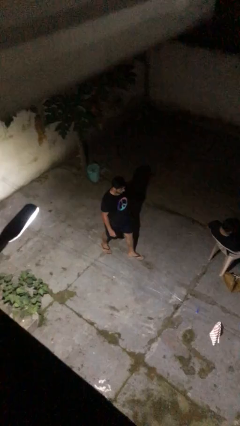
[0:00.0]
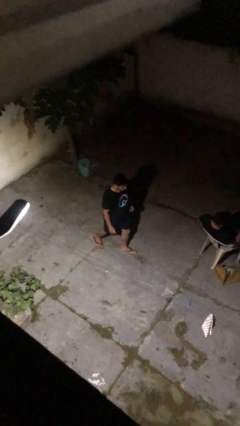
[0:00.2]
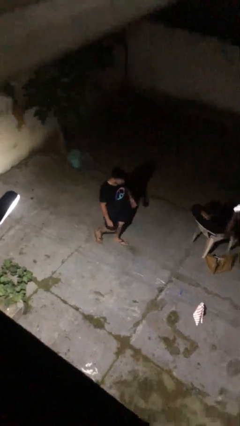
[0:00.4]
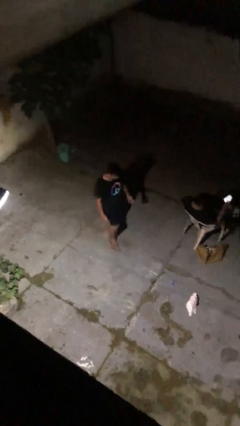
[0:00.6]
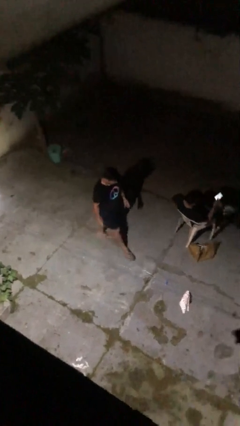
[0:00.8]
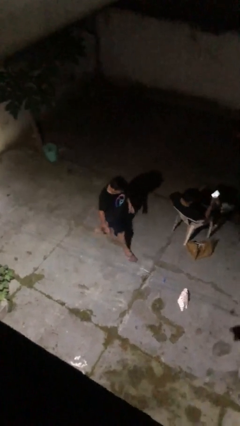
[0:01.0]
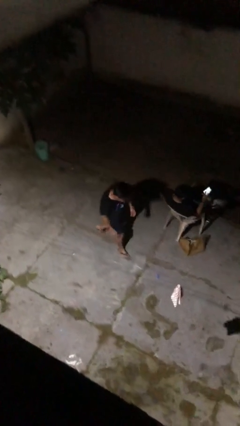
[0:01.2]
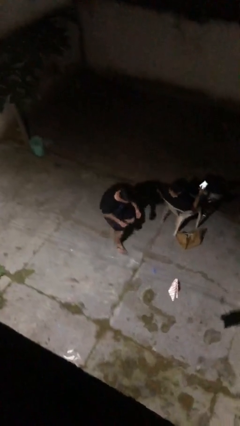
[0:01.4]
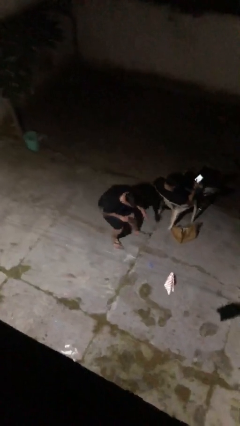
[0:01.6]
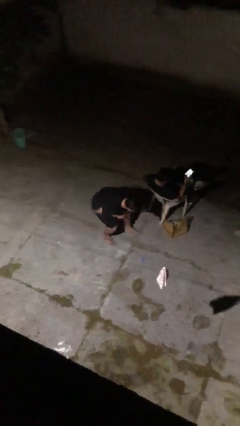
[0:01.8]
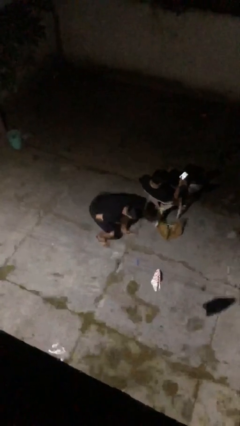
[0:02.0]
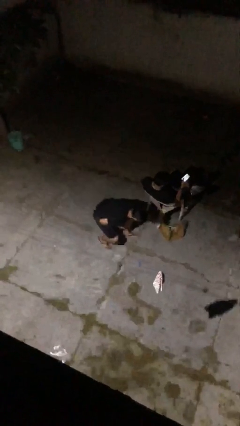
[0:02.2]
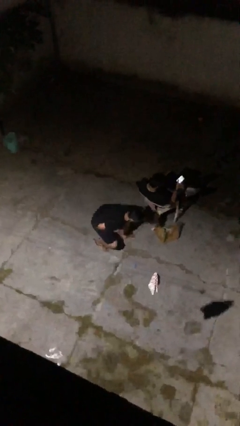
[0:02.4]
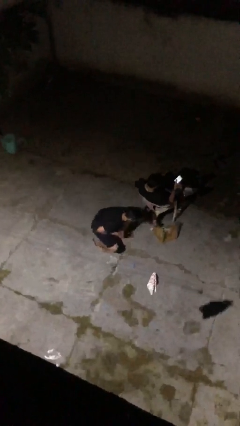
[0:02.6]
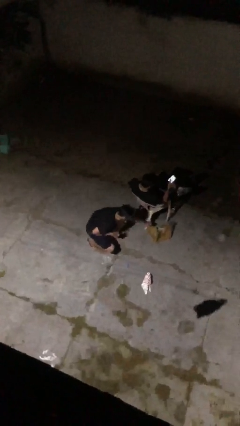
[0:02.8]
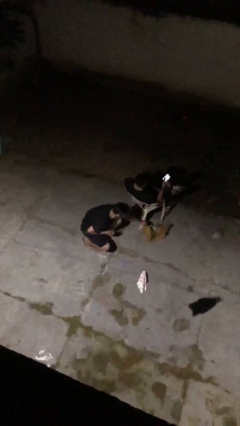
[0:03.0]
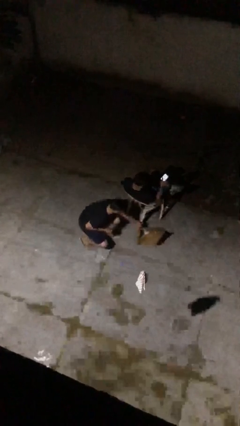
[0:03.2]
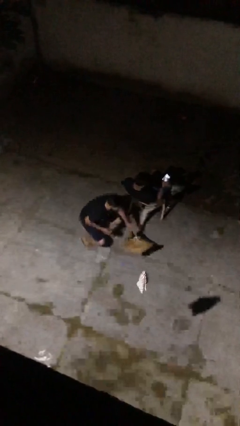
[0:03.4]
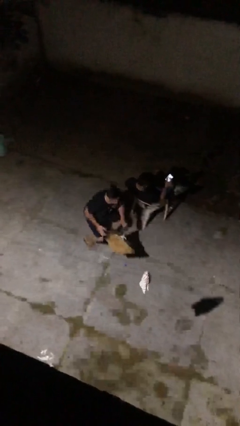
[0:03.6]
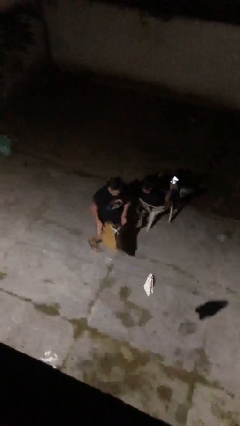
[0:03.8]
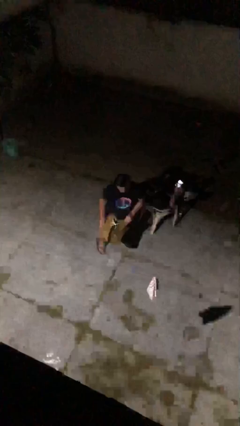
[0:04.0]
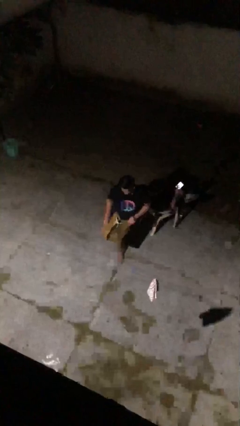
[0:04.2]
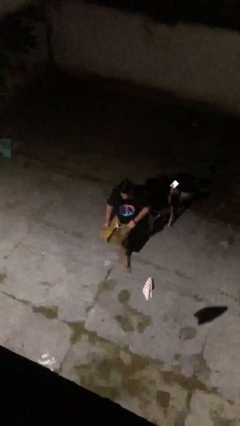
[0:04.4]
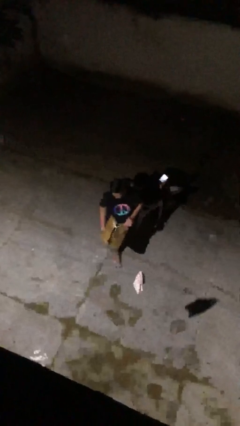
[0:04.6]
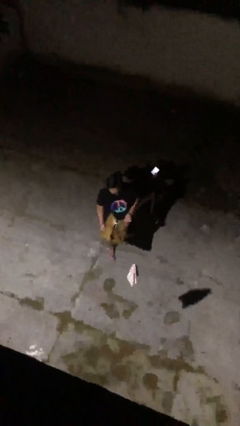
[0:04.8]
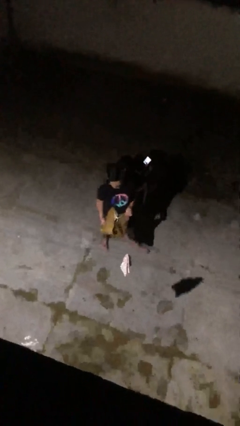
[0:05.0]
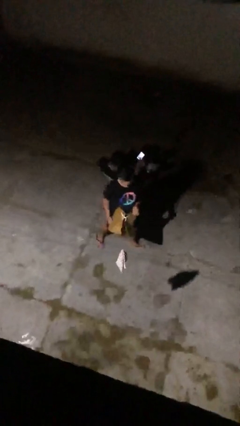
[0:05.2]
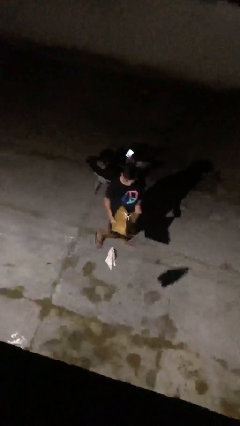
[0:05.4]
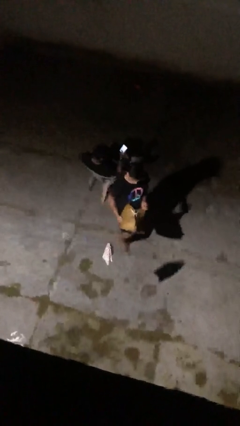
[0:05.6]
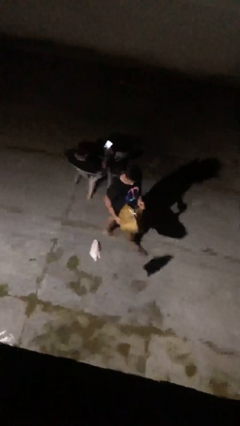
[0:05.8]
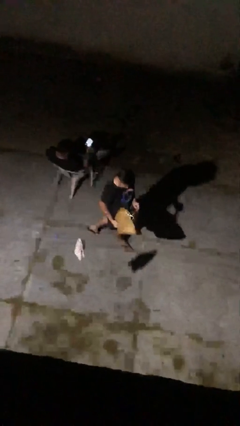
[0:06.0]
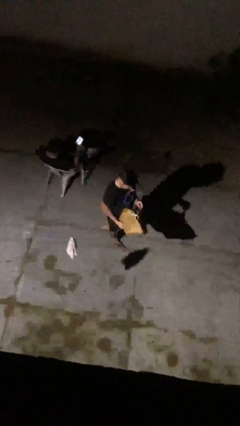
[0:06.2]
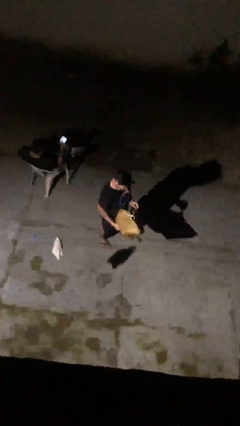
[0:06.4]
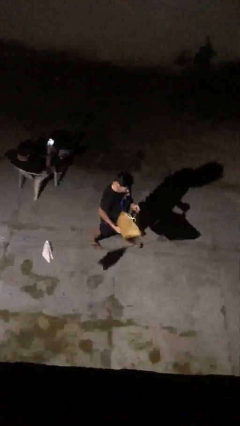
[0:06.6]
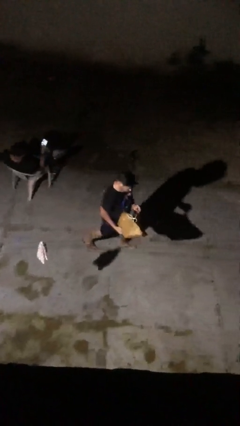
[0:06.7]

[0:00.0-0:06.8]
person steals object from person

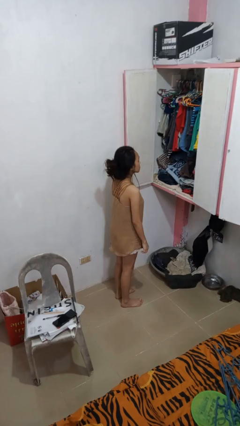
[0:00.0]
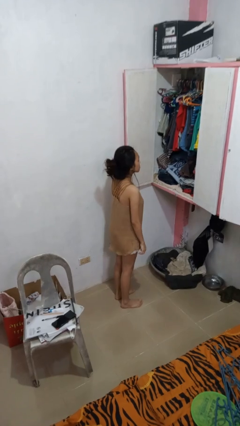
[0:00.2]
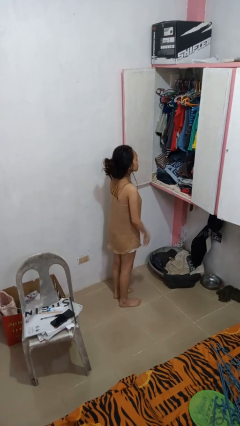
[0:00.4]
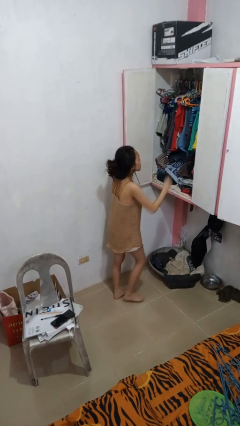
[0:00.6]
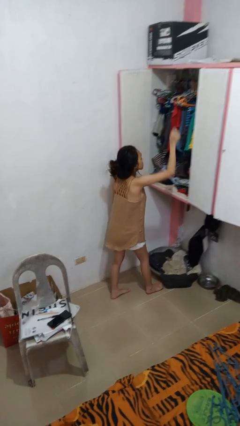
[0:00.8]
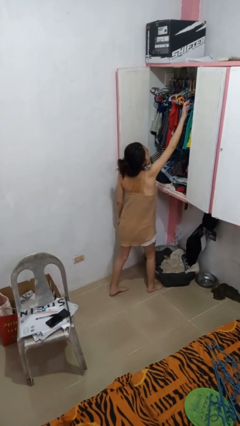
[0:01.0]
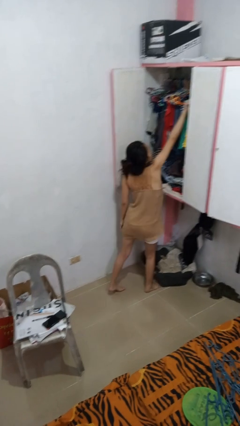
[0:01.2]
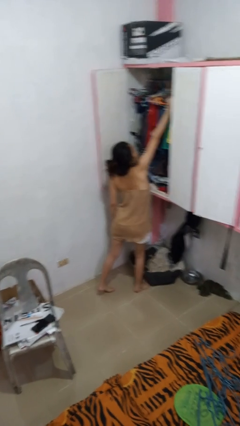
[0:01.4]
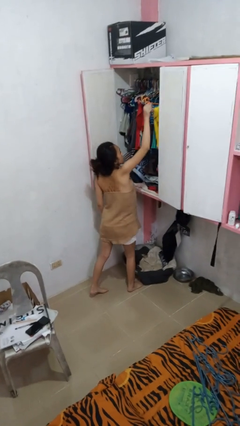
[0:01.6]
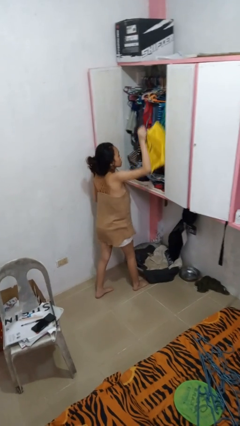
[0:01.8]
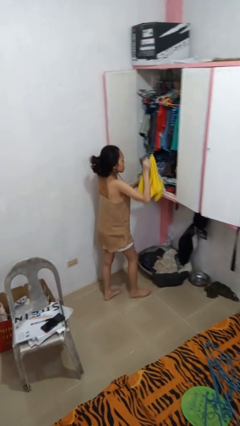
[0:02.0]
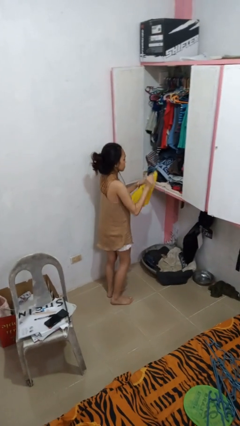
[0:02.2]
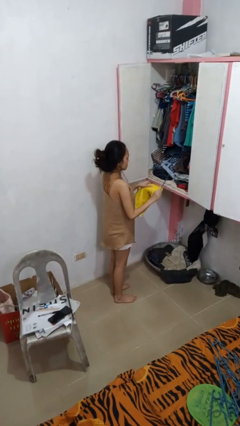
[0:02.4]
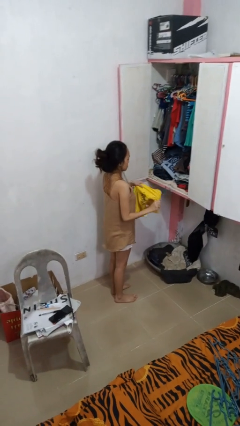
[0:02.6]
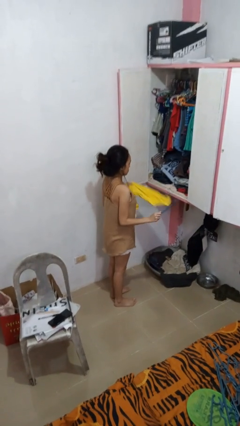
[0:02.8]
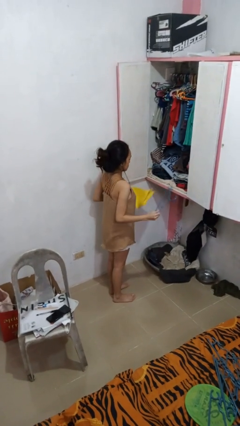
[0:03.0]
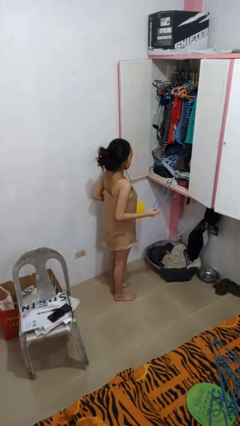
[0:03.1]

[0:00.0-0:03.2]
person takes clothes from closet

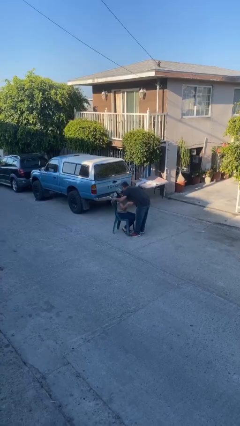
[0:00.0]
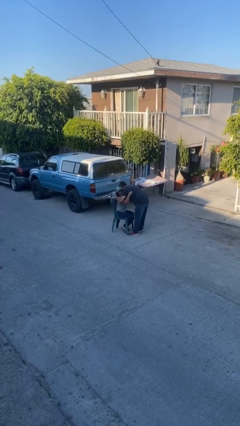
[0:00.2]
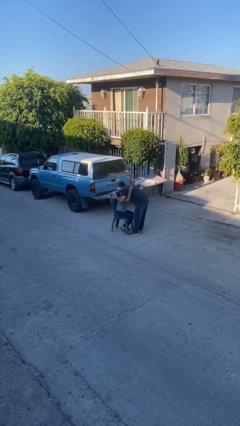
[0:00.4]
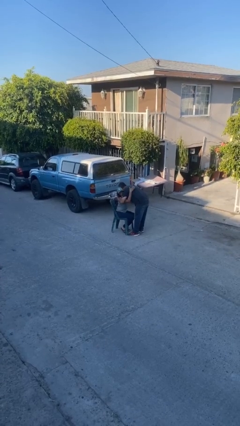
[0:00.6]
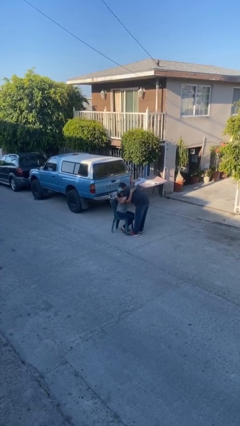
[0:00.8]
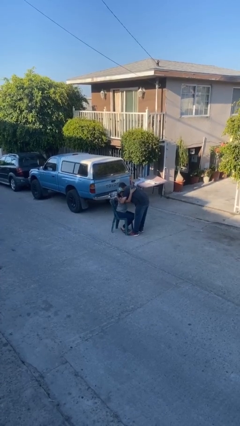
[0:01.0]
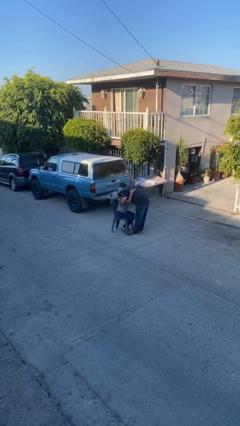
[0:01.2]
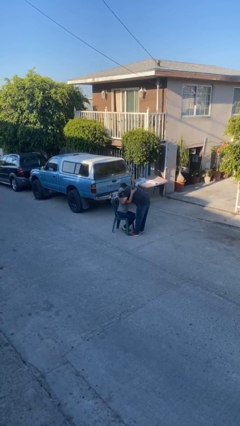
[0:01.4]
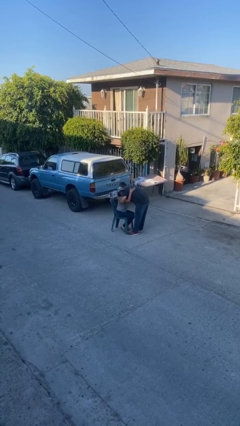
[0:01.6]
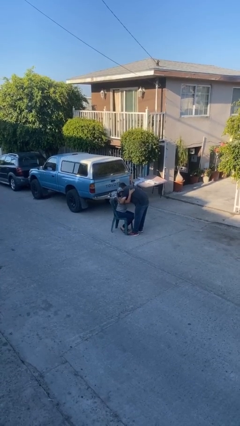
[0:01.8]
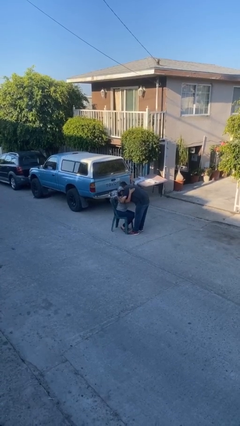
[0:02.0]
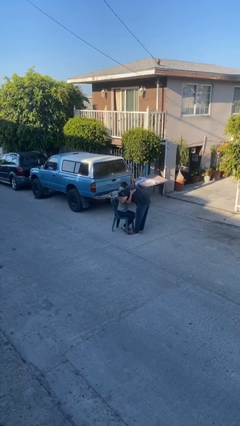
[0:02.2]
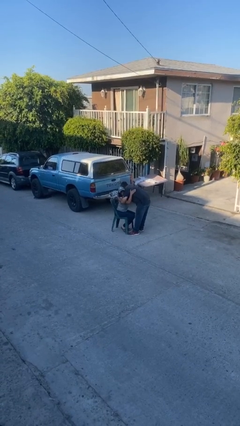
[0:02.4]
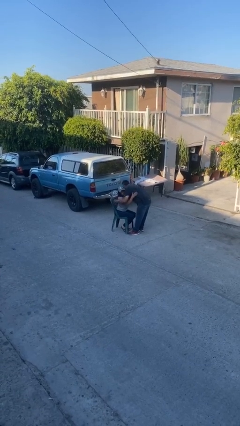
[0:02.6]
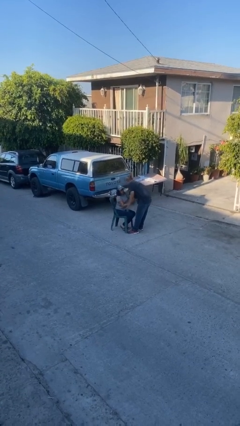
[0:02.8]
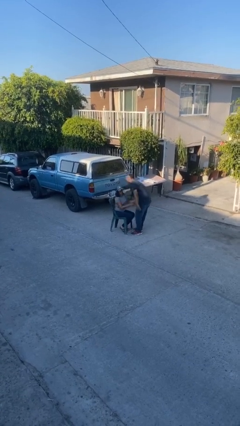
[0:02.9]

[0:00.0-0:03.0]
person embraces person

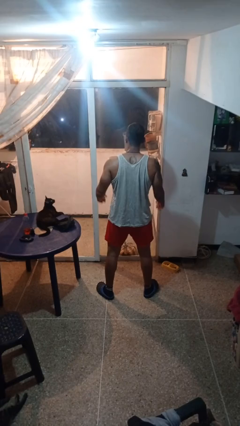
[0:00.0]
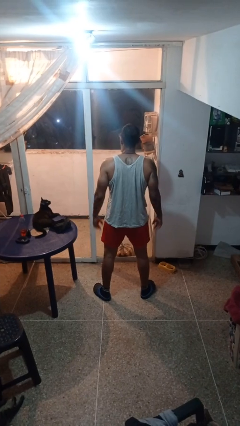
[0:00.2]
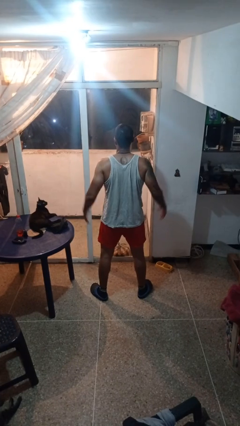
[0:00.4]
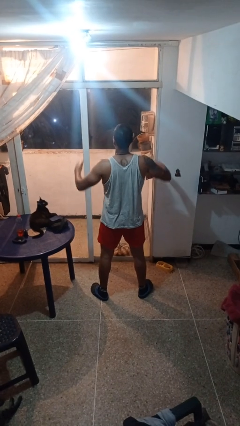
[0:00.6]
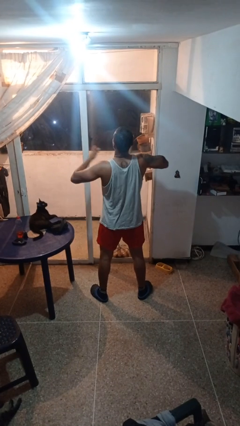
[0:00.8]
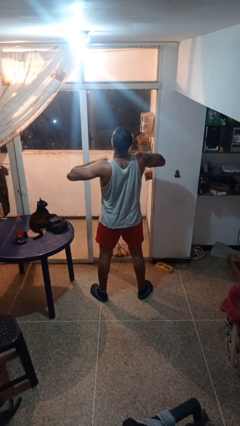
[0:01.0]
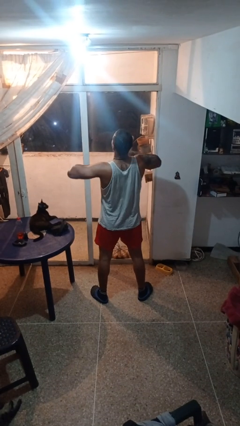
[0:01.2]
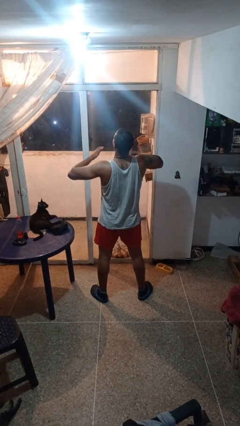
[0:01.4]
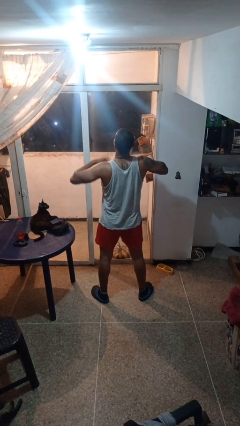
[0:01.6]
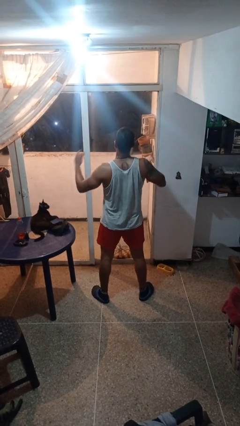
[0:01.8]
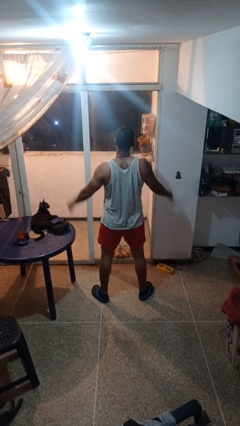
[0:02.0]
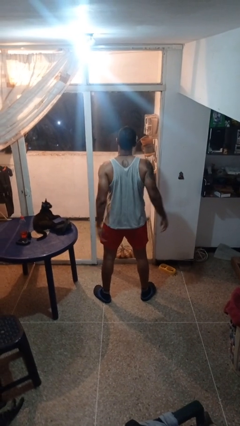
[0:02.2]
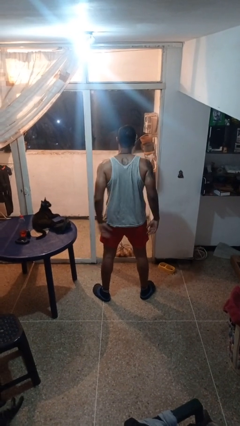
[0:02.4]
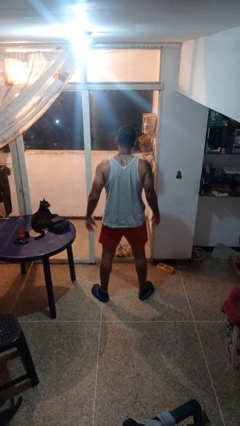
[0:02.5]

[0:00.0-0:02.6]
person drums on chest

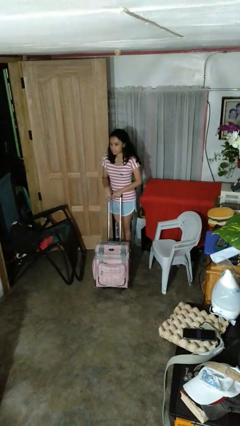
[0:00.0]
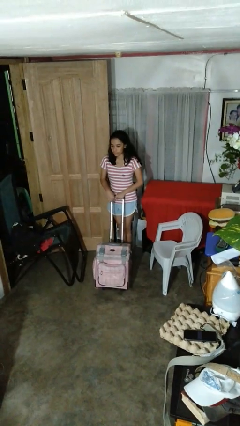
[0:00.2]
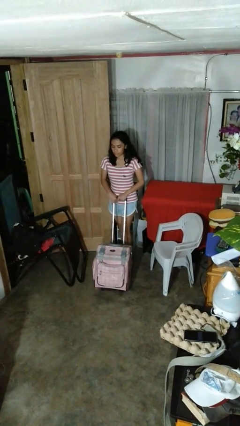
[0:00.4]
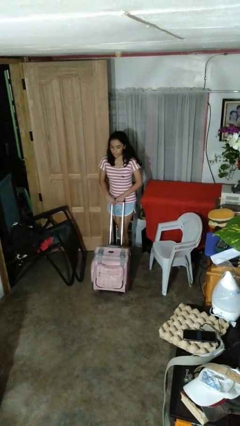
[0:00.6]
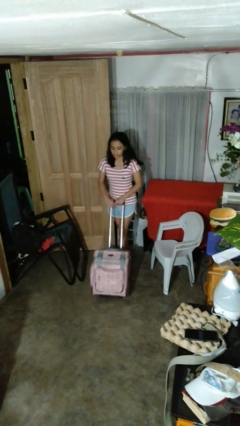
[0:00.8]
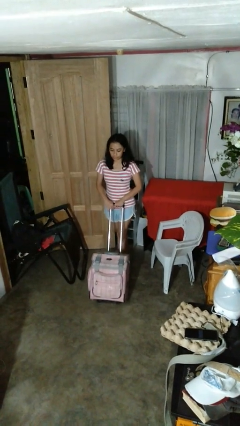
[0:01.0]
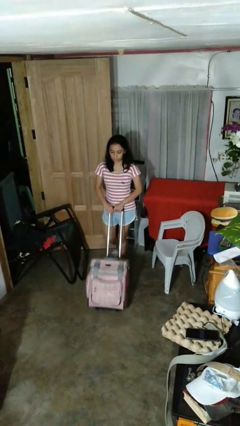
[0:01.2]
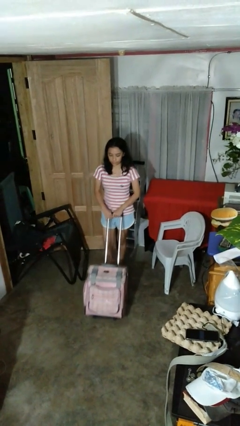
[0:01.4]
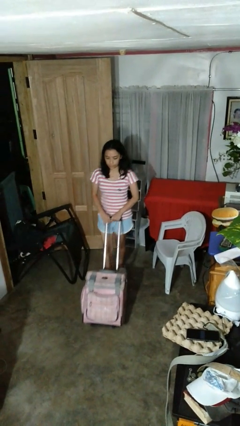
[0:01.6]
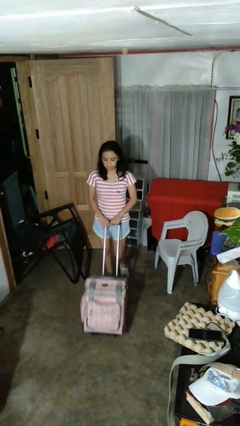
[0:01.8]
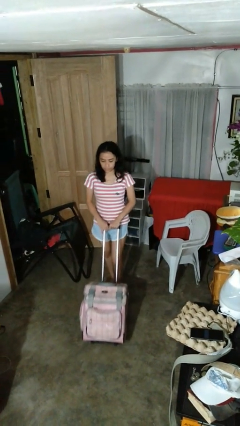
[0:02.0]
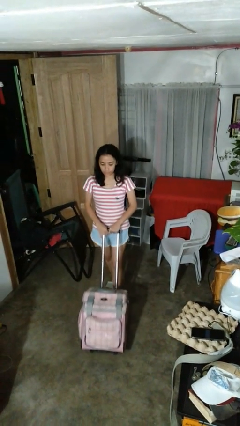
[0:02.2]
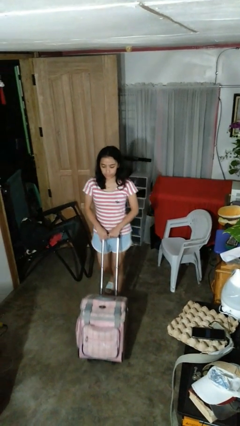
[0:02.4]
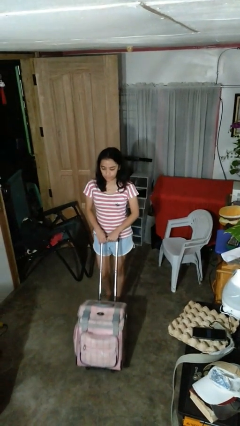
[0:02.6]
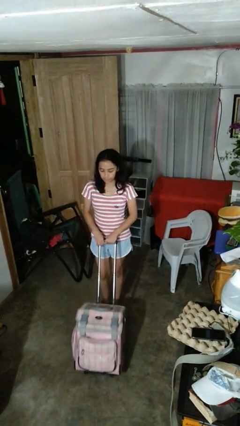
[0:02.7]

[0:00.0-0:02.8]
person pushes wheeled cart
